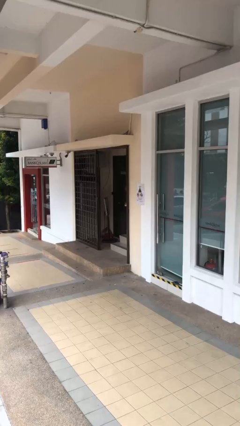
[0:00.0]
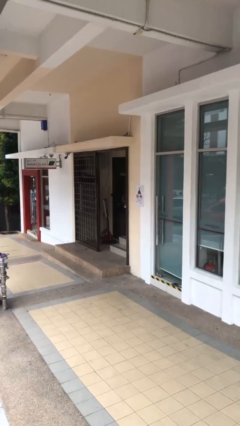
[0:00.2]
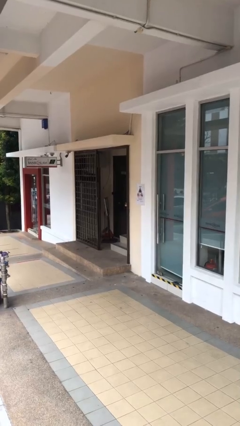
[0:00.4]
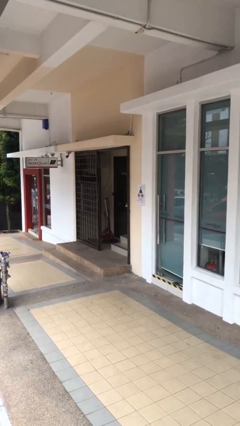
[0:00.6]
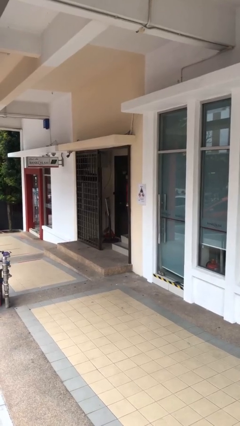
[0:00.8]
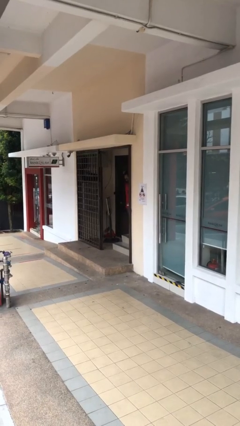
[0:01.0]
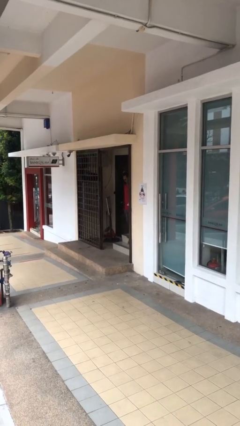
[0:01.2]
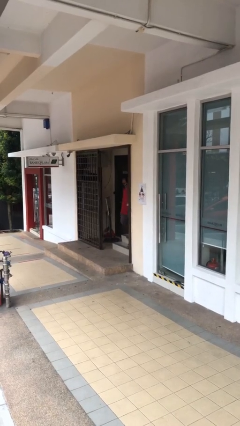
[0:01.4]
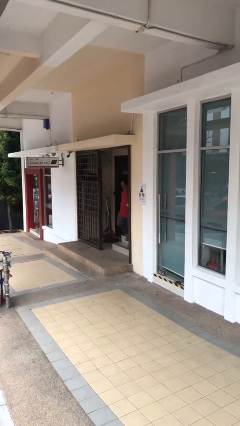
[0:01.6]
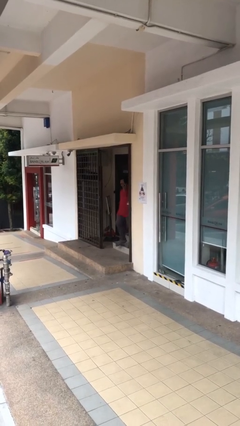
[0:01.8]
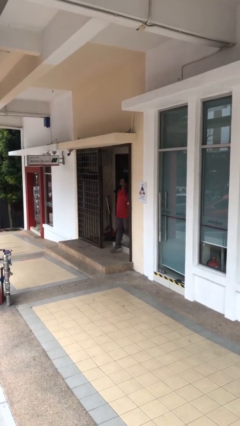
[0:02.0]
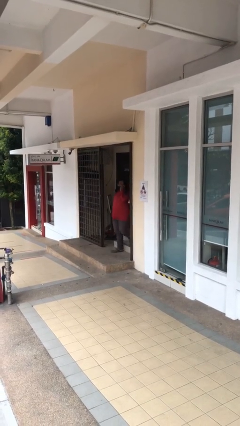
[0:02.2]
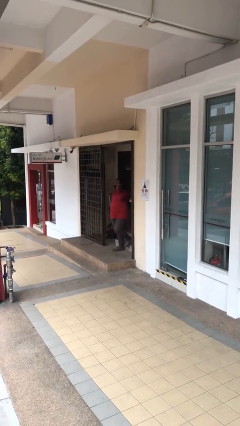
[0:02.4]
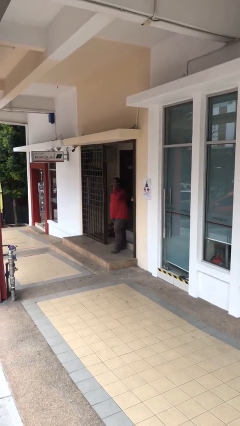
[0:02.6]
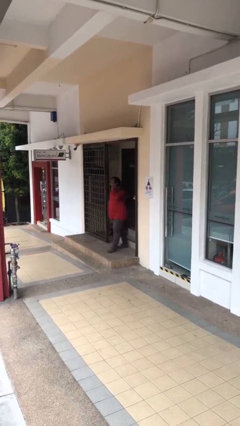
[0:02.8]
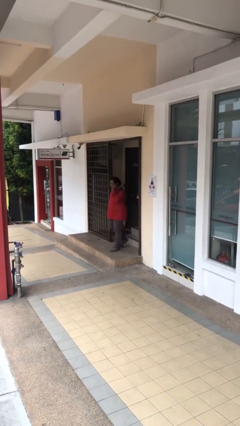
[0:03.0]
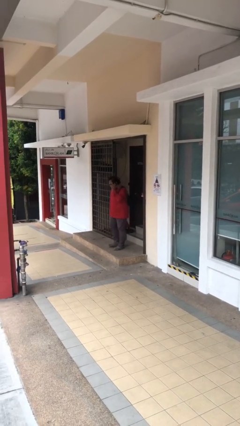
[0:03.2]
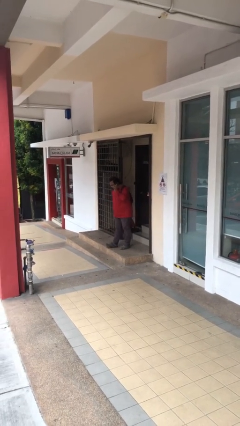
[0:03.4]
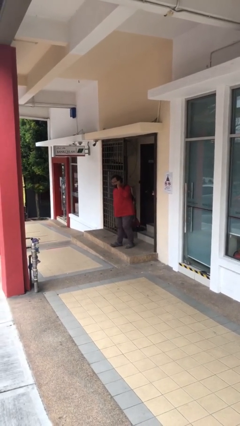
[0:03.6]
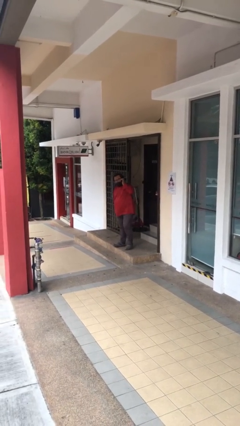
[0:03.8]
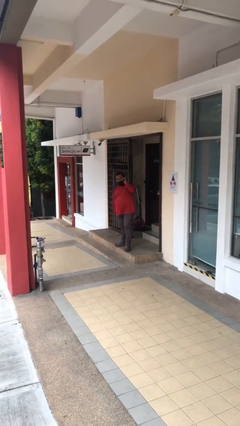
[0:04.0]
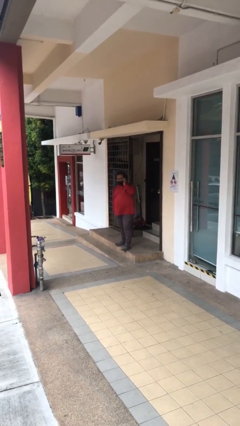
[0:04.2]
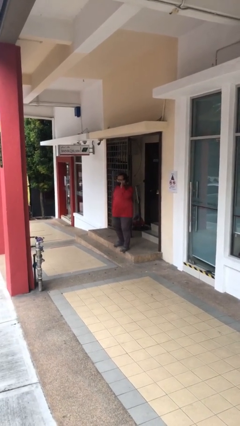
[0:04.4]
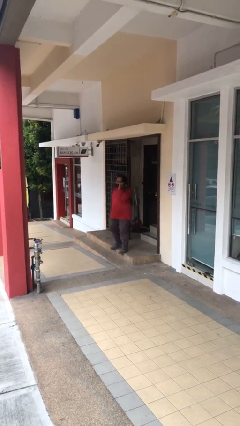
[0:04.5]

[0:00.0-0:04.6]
person enters scene through structure

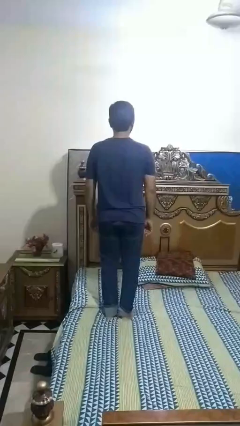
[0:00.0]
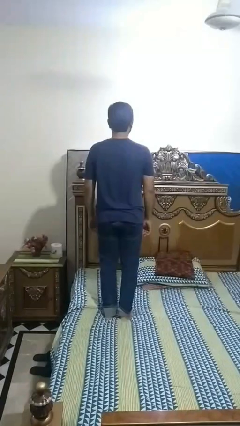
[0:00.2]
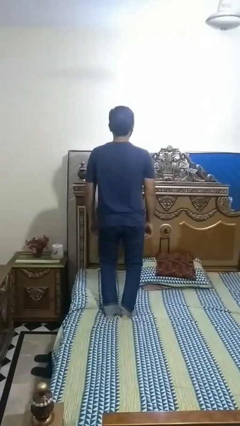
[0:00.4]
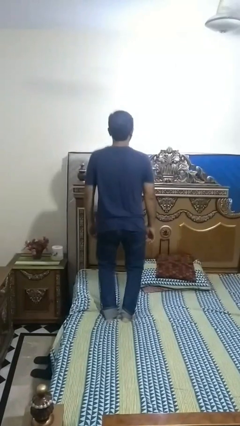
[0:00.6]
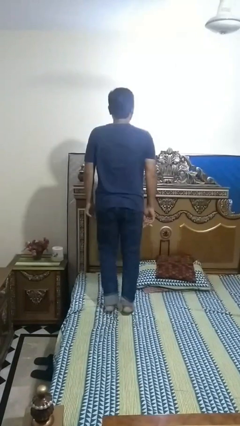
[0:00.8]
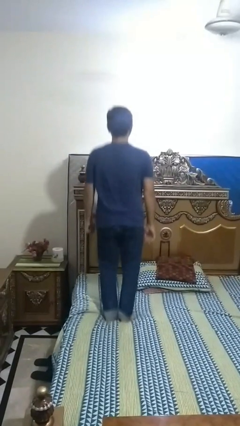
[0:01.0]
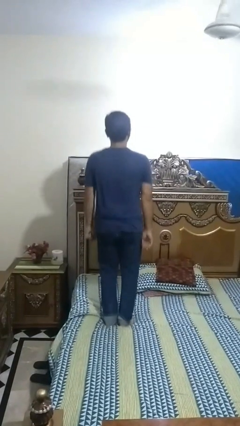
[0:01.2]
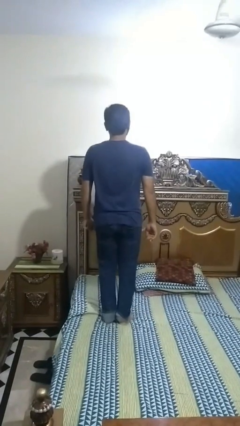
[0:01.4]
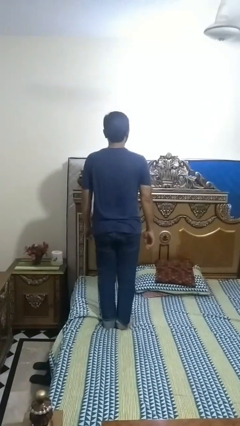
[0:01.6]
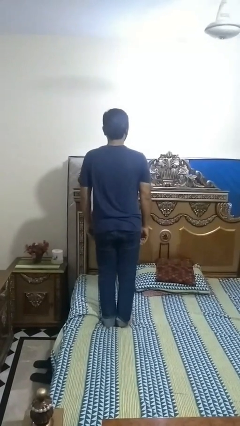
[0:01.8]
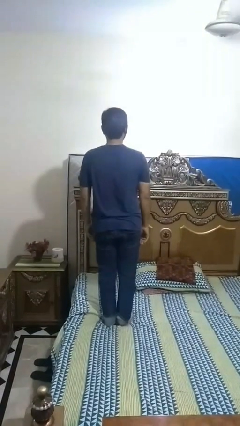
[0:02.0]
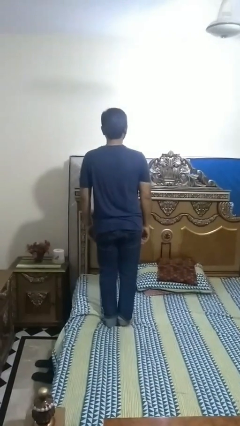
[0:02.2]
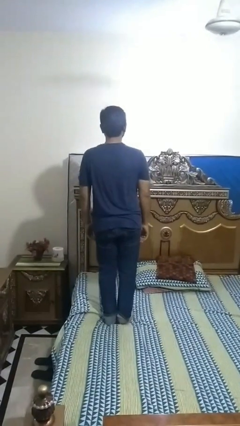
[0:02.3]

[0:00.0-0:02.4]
person jumps on bed

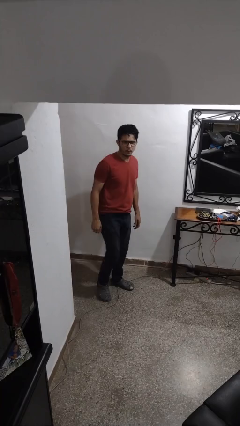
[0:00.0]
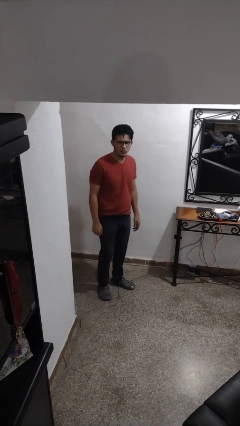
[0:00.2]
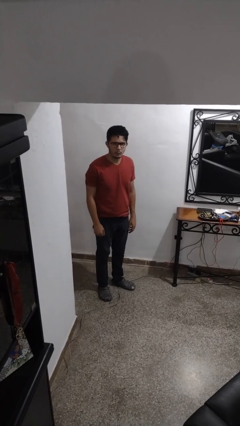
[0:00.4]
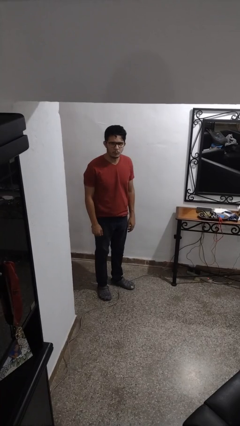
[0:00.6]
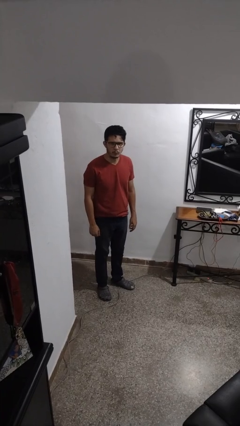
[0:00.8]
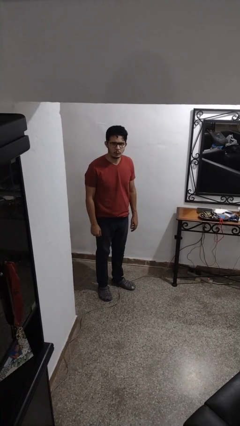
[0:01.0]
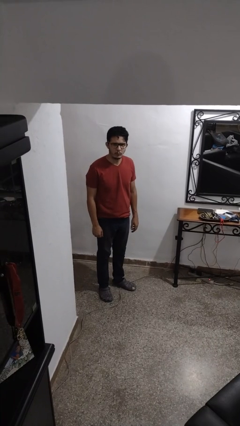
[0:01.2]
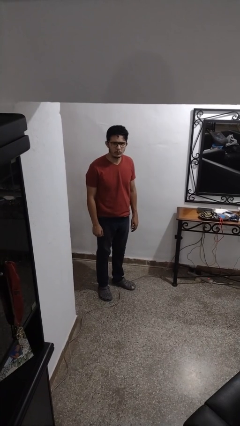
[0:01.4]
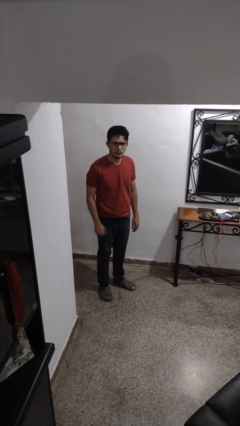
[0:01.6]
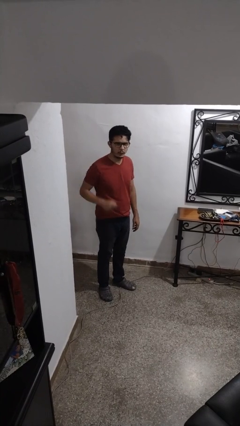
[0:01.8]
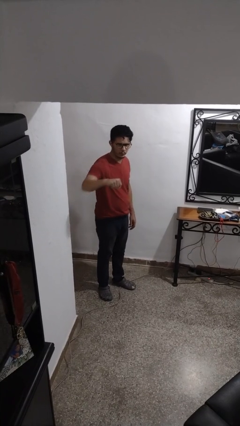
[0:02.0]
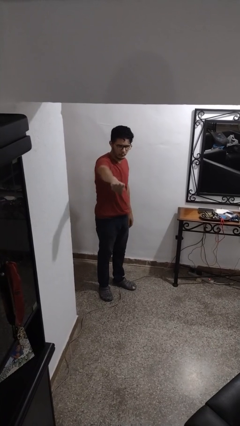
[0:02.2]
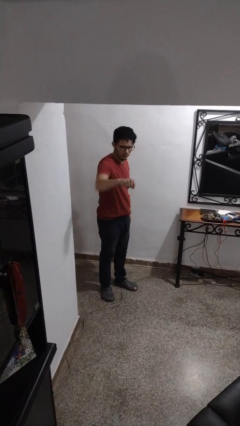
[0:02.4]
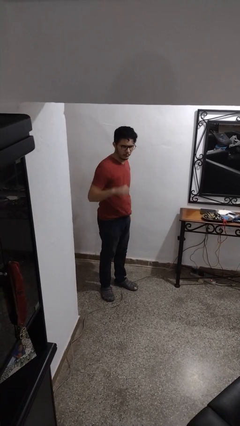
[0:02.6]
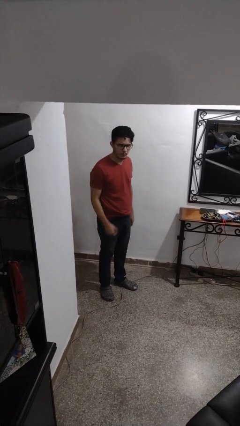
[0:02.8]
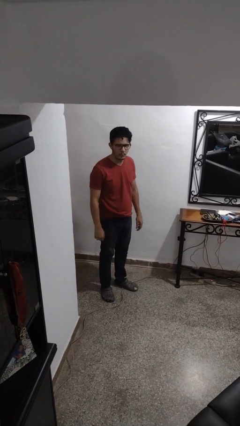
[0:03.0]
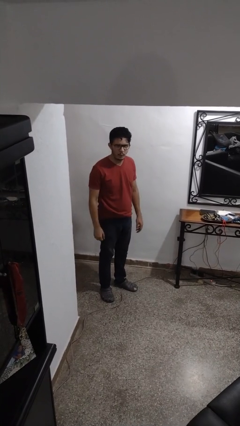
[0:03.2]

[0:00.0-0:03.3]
person karate chop

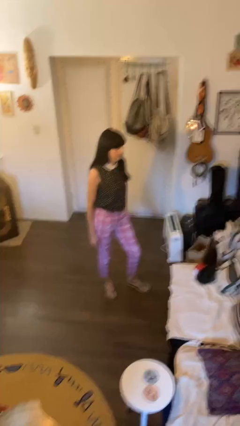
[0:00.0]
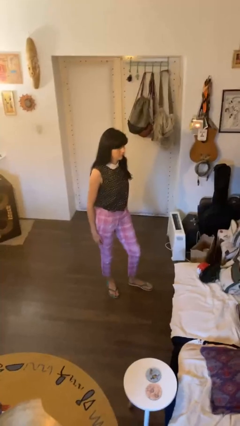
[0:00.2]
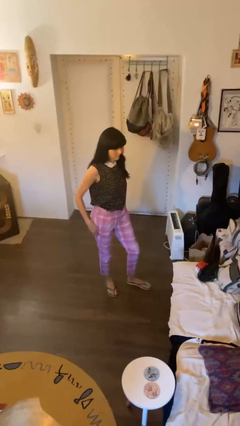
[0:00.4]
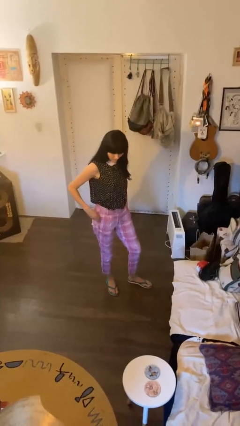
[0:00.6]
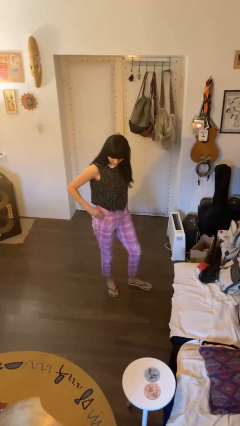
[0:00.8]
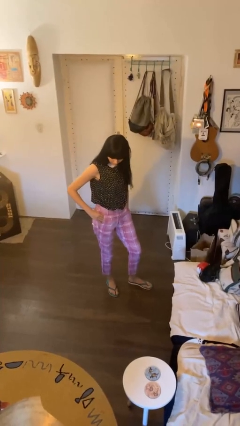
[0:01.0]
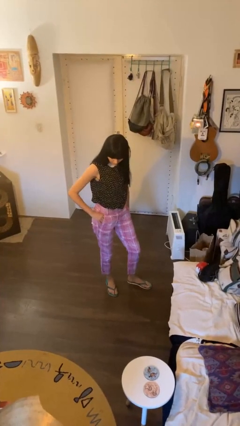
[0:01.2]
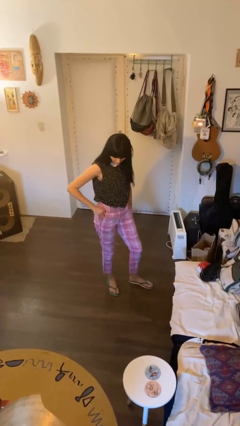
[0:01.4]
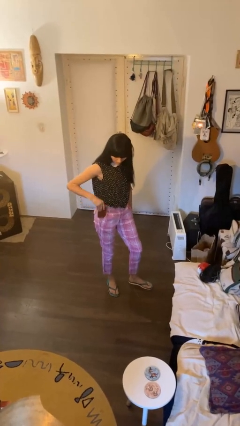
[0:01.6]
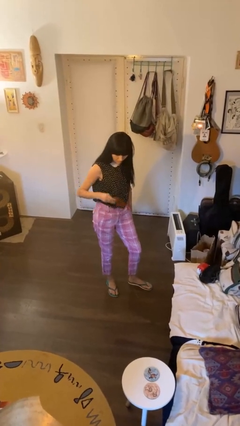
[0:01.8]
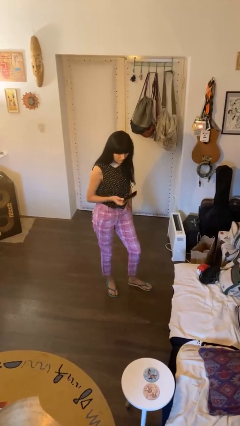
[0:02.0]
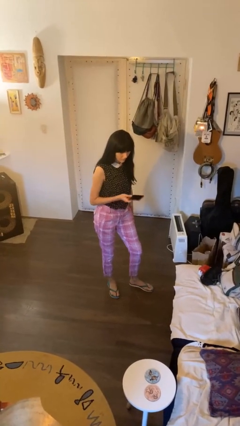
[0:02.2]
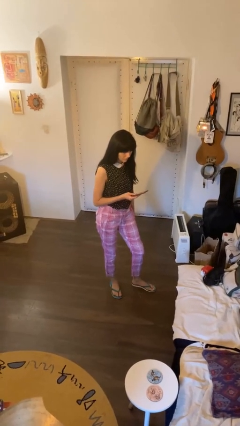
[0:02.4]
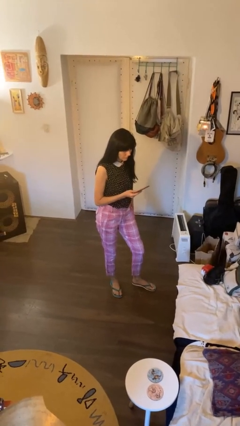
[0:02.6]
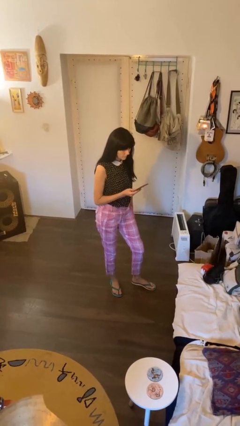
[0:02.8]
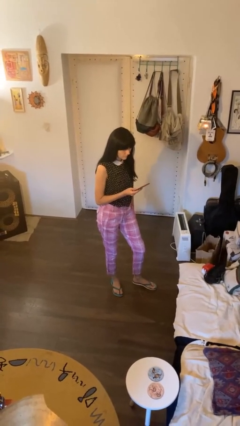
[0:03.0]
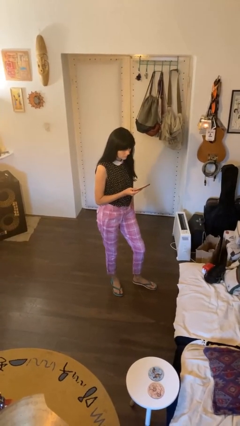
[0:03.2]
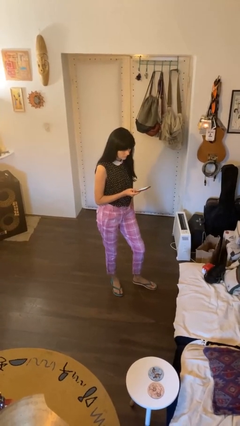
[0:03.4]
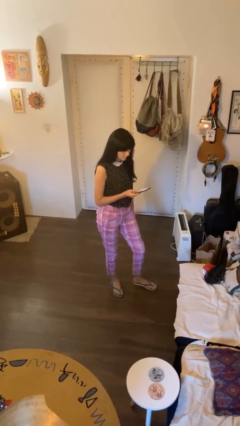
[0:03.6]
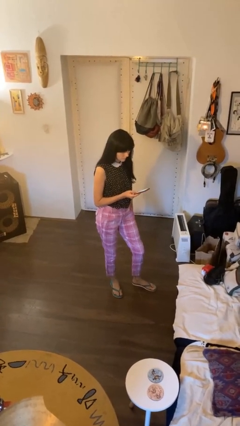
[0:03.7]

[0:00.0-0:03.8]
person takes phone from pocket

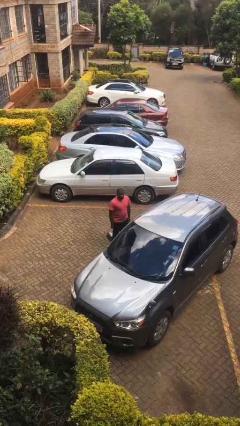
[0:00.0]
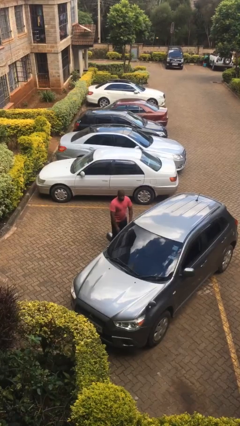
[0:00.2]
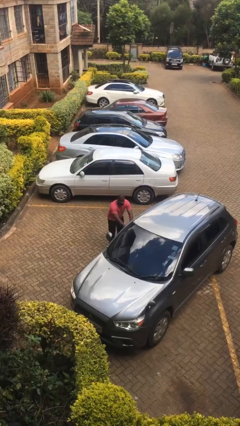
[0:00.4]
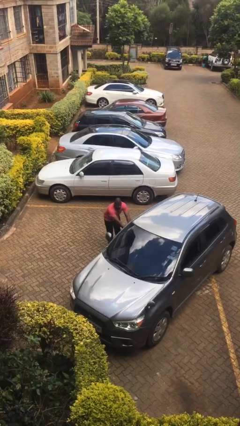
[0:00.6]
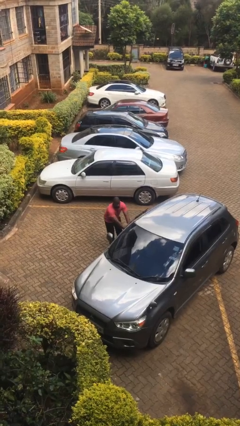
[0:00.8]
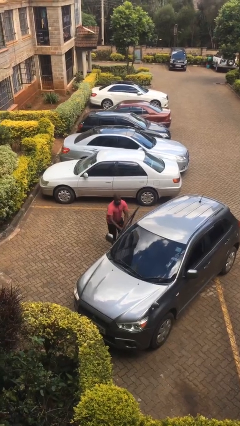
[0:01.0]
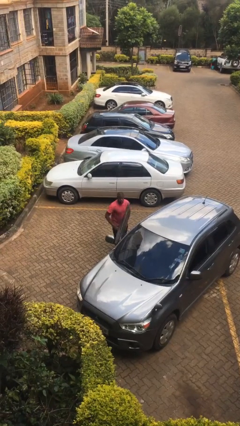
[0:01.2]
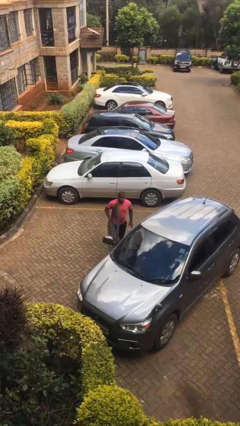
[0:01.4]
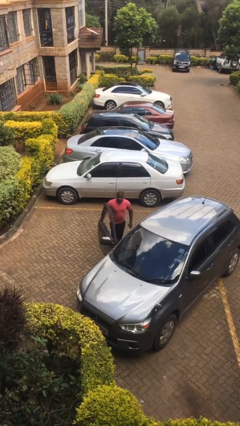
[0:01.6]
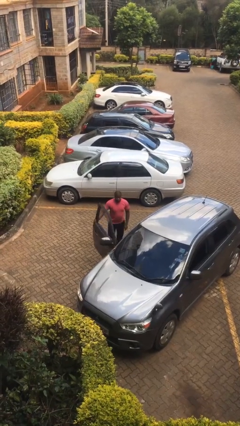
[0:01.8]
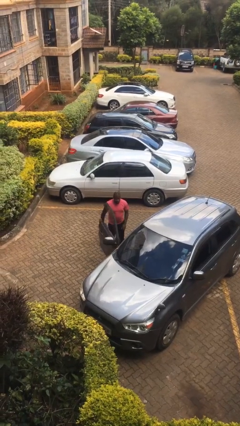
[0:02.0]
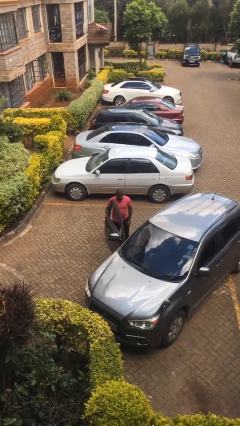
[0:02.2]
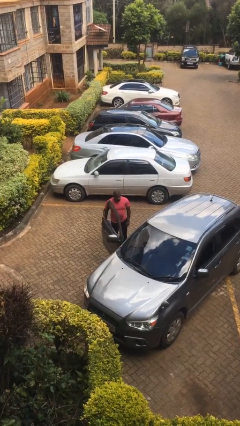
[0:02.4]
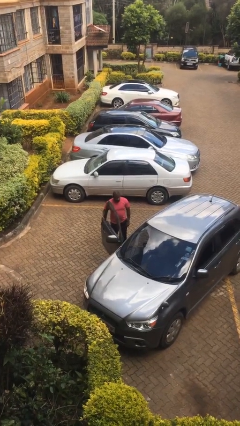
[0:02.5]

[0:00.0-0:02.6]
person opens car door

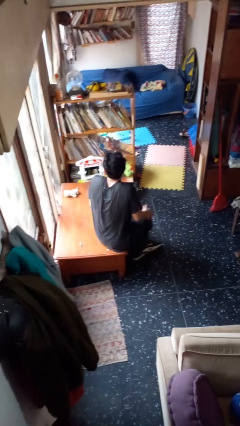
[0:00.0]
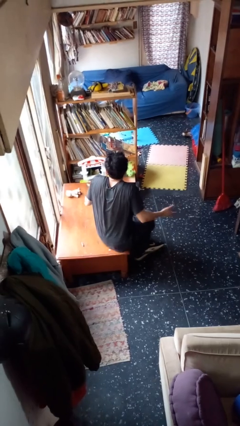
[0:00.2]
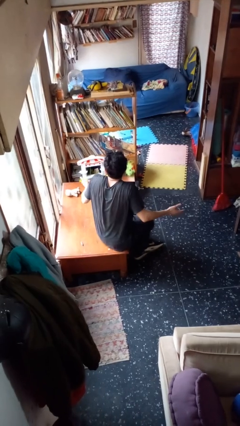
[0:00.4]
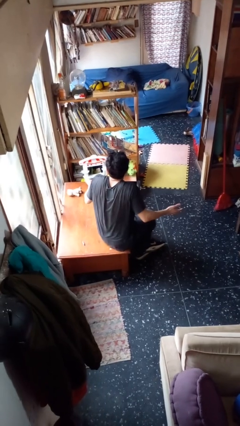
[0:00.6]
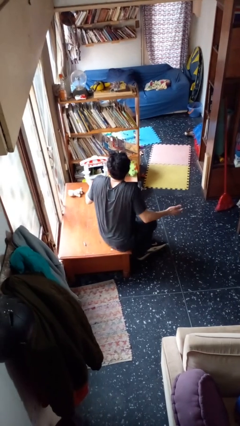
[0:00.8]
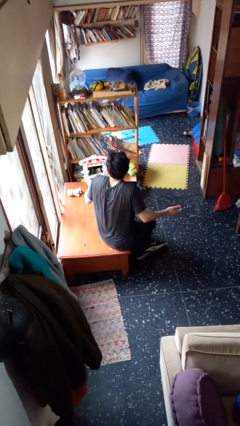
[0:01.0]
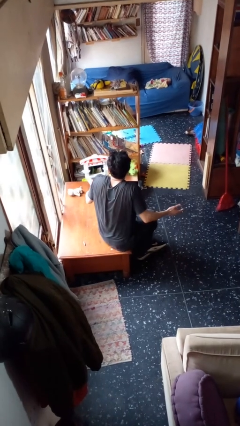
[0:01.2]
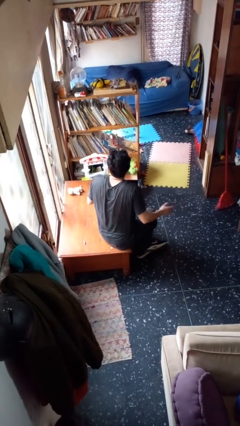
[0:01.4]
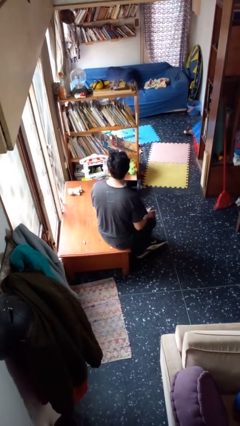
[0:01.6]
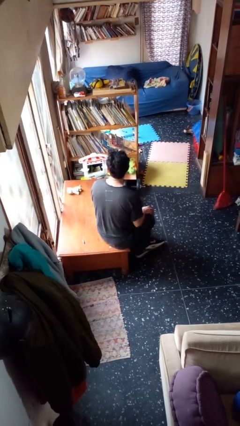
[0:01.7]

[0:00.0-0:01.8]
person shrugs
